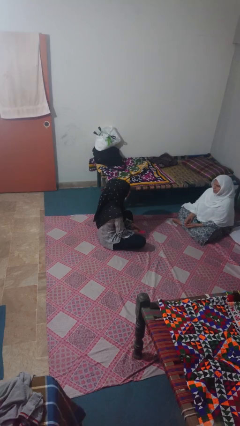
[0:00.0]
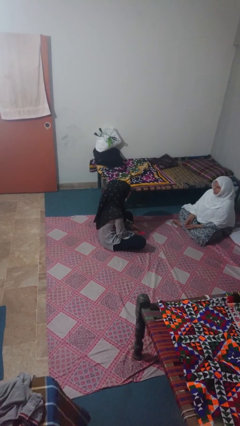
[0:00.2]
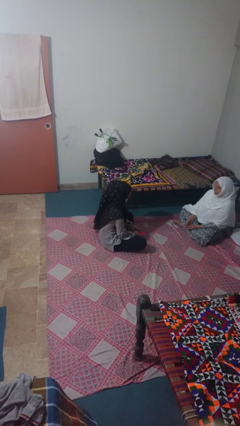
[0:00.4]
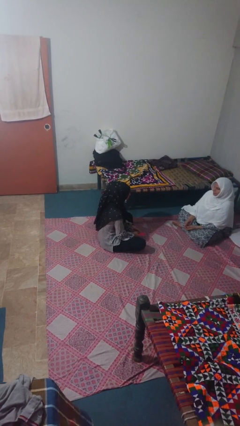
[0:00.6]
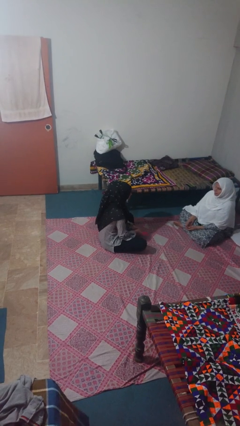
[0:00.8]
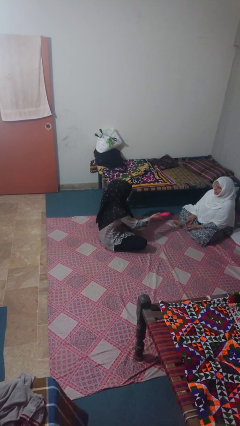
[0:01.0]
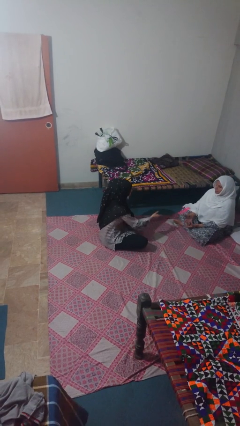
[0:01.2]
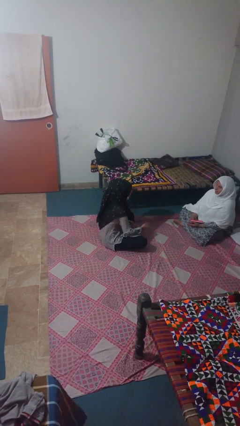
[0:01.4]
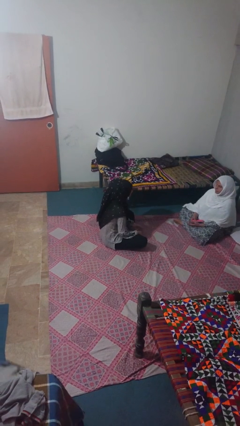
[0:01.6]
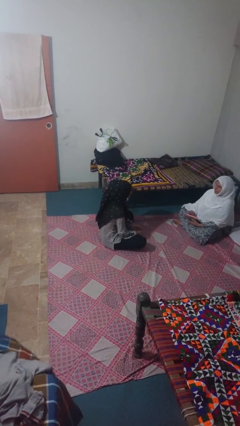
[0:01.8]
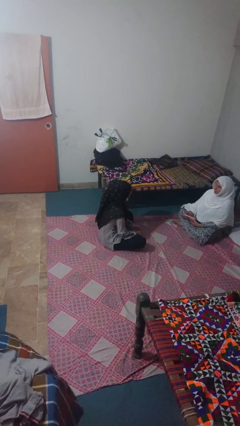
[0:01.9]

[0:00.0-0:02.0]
person throws object to person

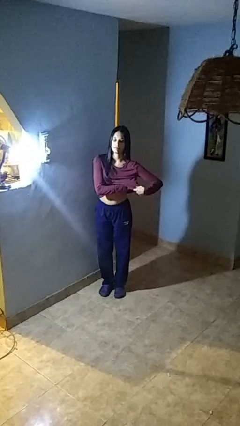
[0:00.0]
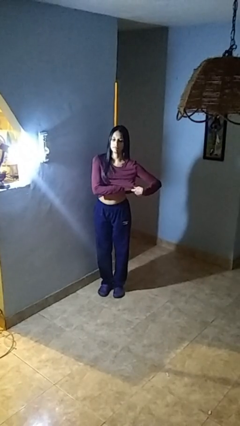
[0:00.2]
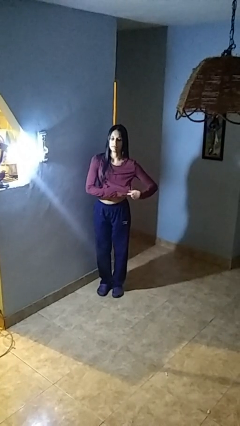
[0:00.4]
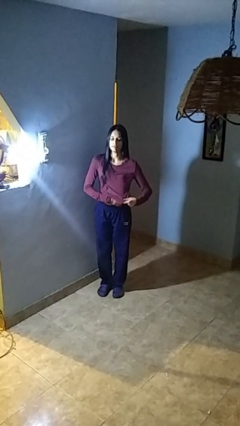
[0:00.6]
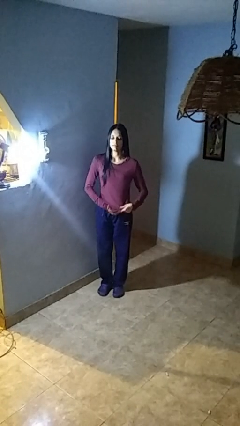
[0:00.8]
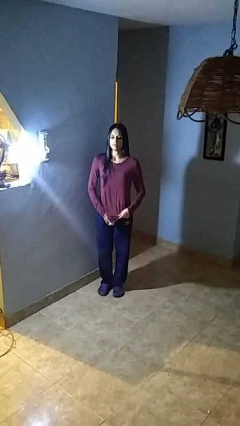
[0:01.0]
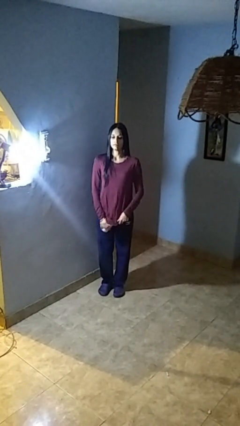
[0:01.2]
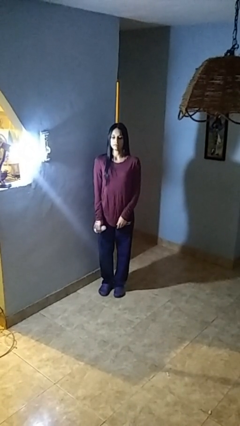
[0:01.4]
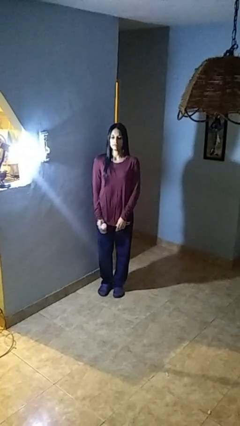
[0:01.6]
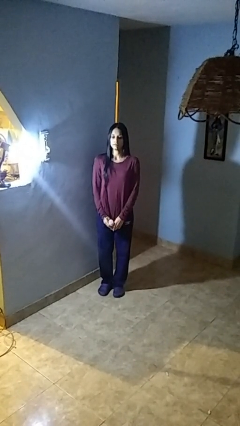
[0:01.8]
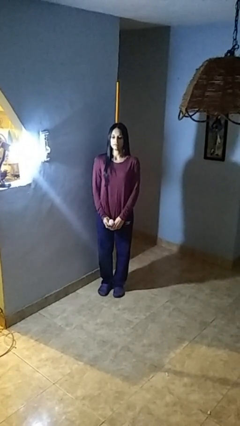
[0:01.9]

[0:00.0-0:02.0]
person applies deodorant

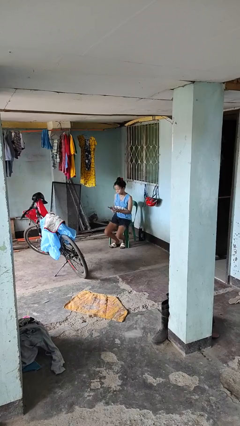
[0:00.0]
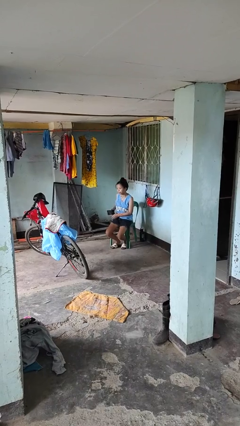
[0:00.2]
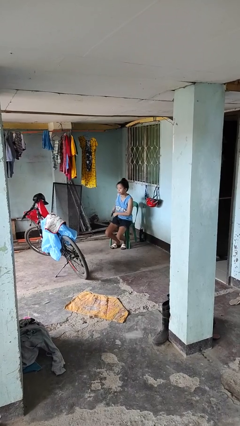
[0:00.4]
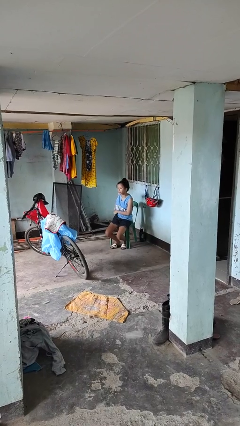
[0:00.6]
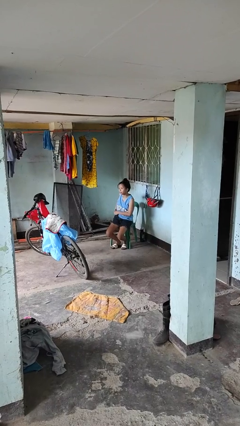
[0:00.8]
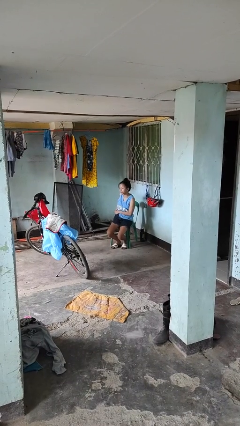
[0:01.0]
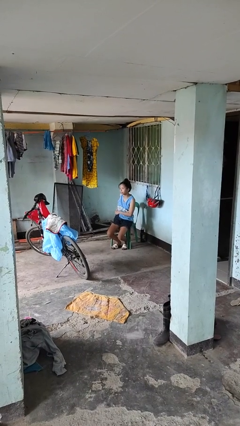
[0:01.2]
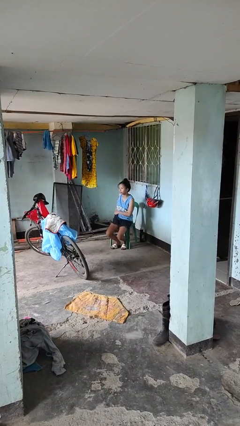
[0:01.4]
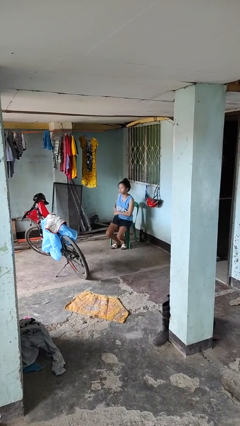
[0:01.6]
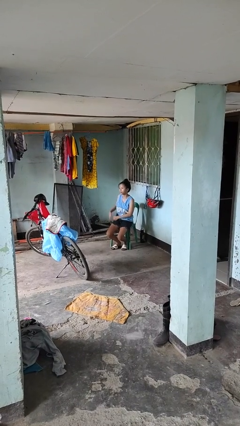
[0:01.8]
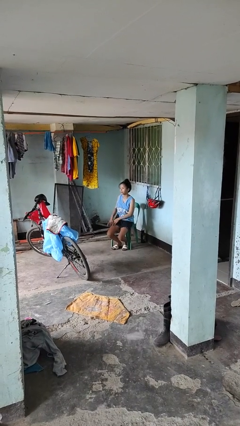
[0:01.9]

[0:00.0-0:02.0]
person puts phone into pocket

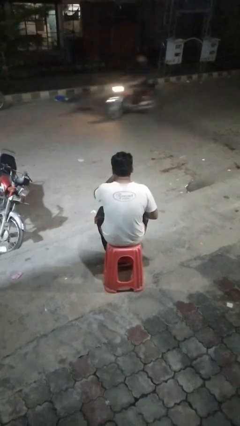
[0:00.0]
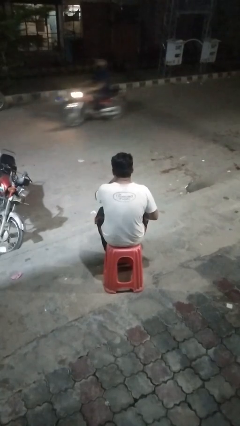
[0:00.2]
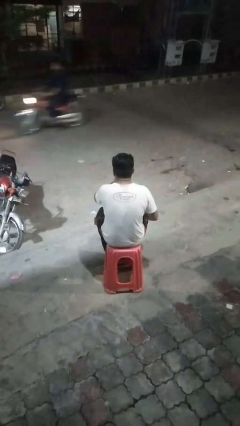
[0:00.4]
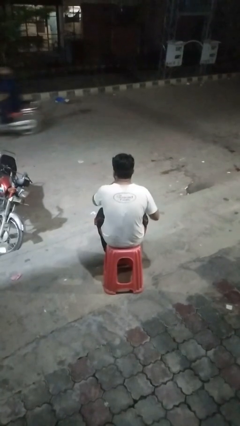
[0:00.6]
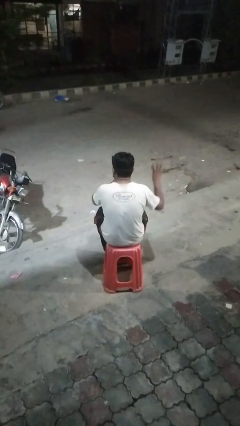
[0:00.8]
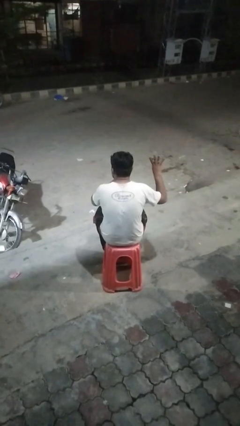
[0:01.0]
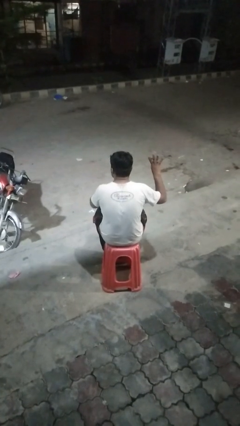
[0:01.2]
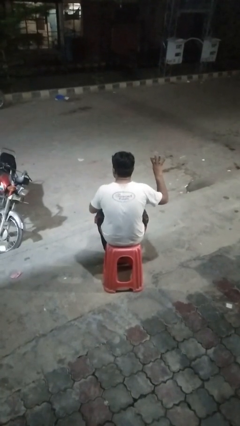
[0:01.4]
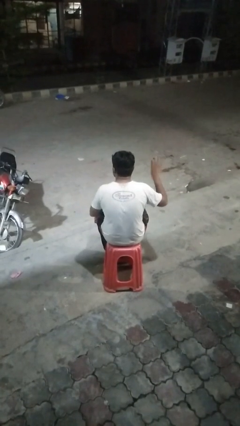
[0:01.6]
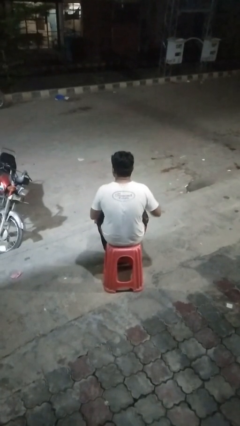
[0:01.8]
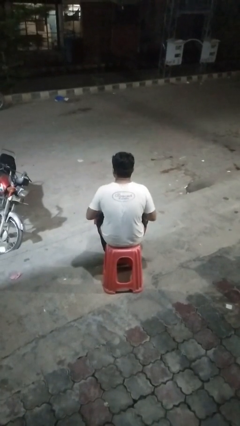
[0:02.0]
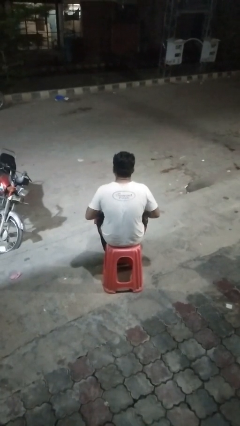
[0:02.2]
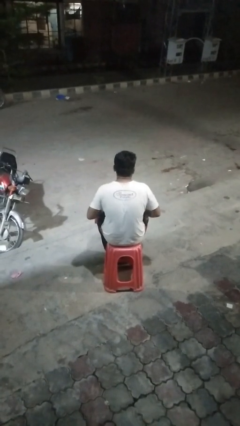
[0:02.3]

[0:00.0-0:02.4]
person gestures number four

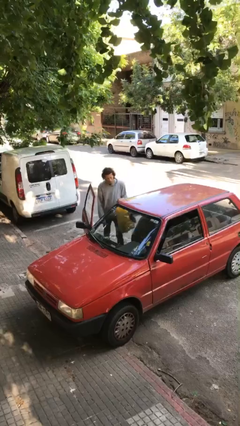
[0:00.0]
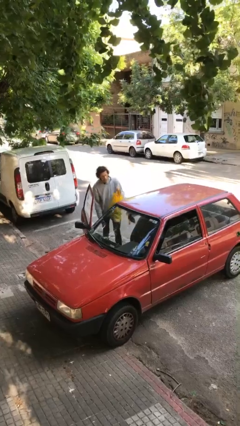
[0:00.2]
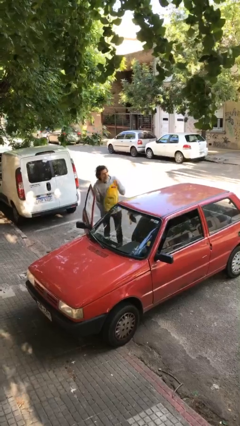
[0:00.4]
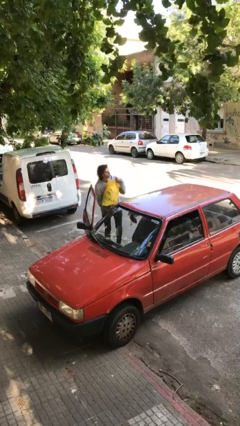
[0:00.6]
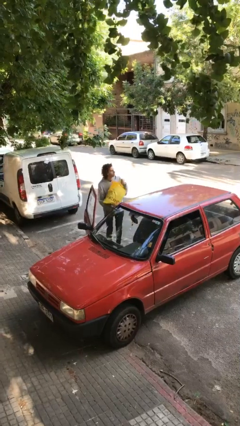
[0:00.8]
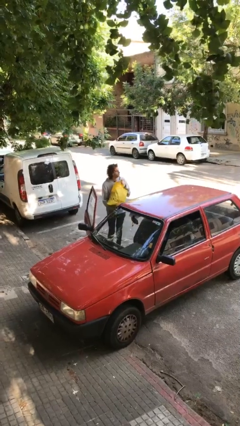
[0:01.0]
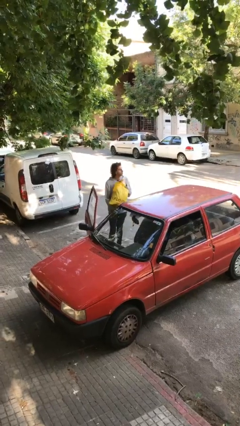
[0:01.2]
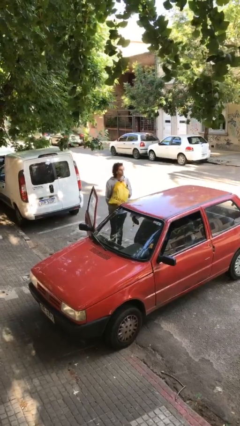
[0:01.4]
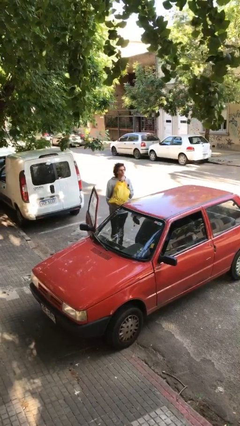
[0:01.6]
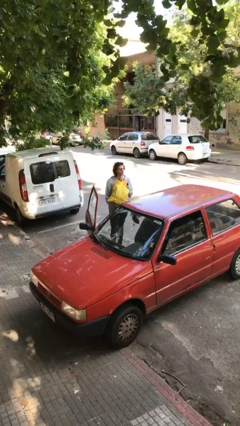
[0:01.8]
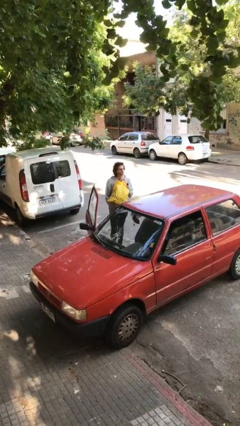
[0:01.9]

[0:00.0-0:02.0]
person unloads car

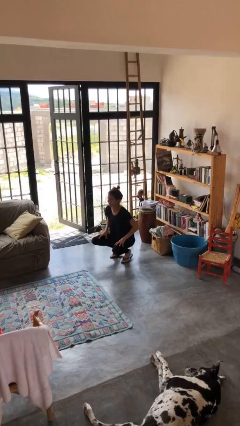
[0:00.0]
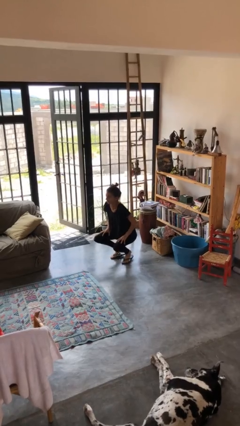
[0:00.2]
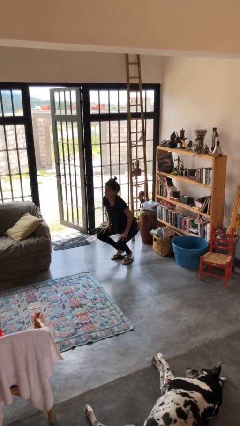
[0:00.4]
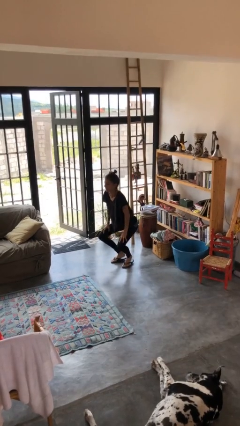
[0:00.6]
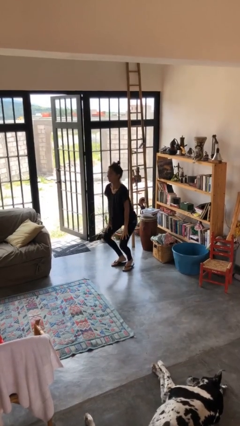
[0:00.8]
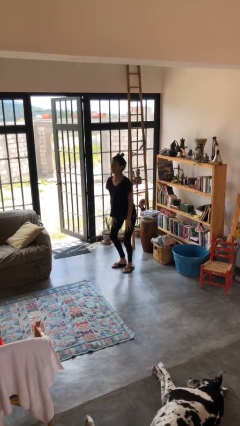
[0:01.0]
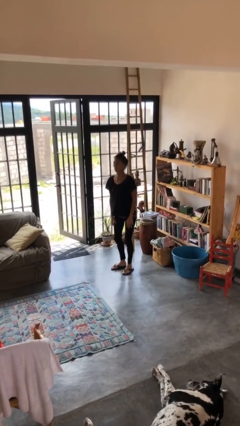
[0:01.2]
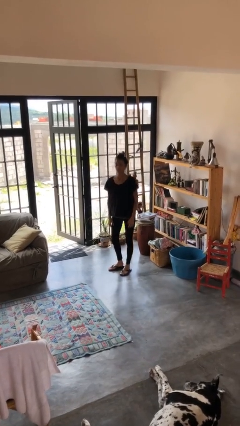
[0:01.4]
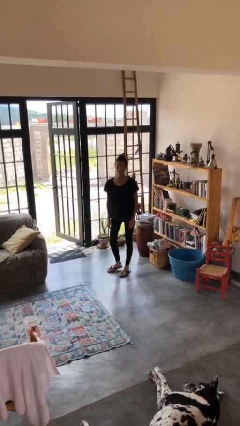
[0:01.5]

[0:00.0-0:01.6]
person stands up

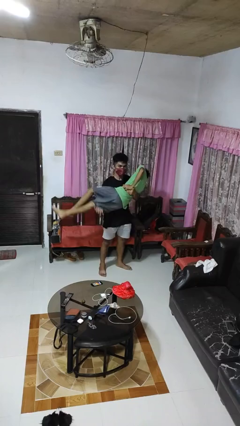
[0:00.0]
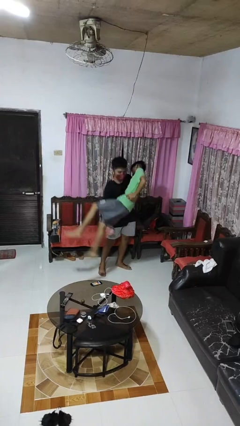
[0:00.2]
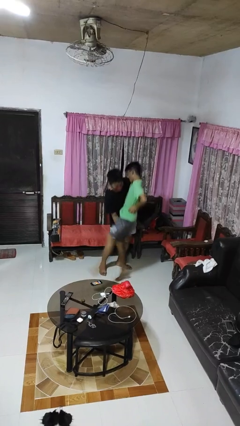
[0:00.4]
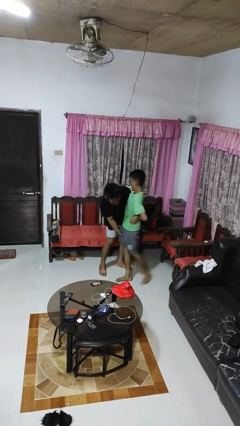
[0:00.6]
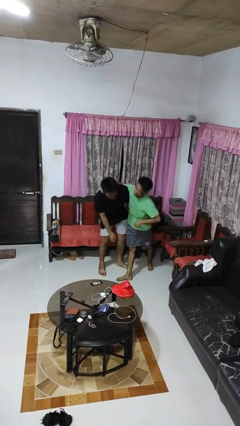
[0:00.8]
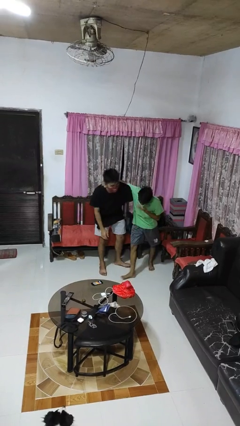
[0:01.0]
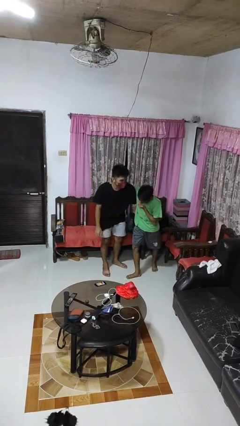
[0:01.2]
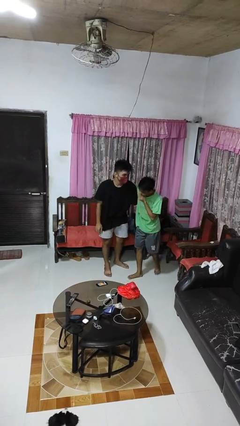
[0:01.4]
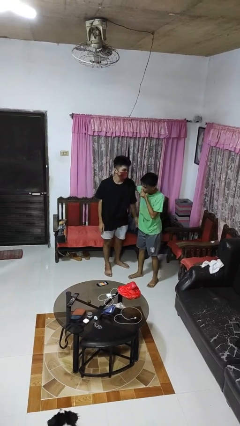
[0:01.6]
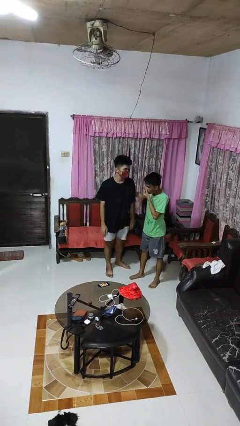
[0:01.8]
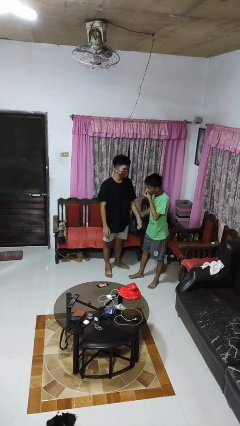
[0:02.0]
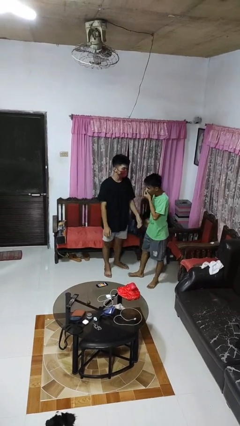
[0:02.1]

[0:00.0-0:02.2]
person puts down person

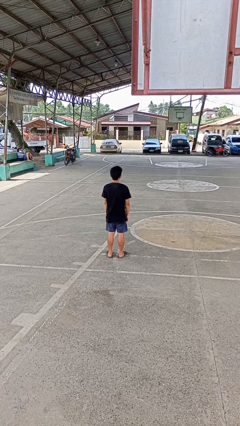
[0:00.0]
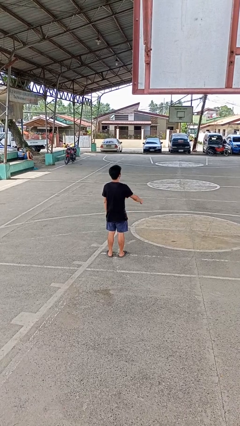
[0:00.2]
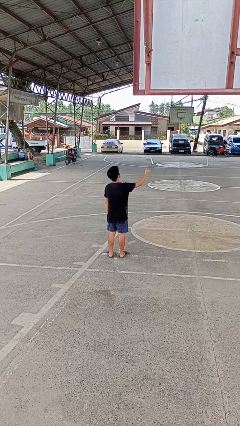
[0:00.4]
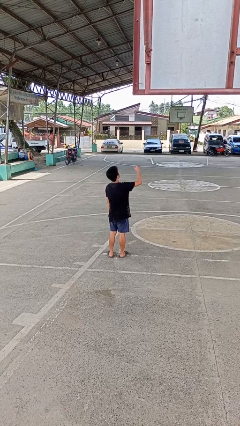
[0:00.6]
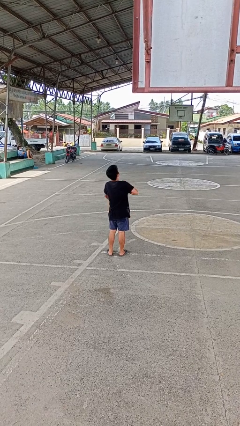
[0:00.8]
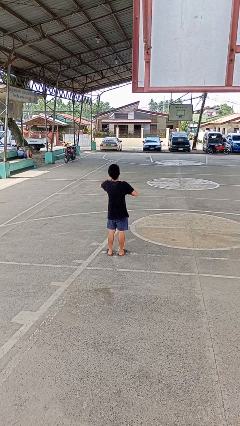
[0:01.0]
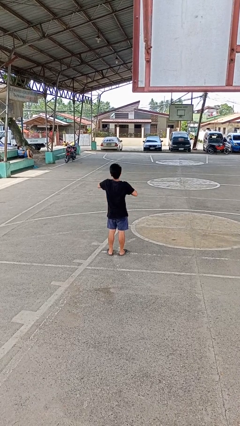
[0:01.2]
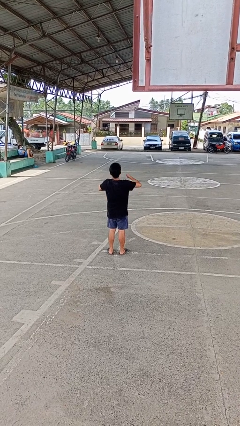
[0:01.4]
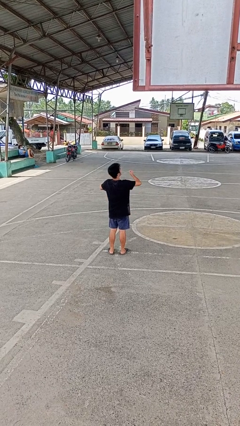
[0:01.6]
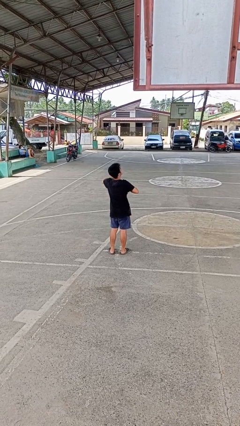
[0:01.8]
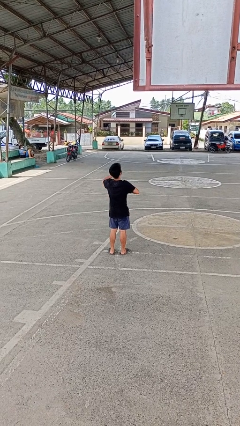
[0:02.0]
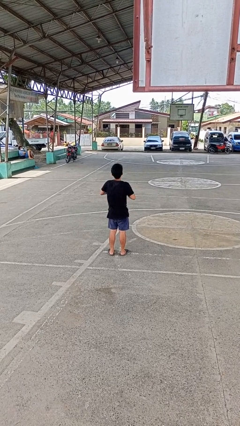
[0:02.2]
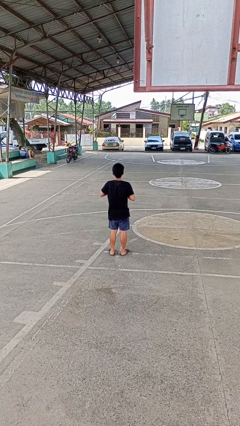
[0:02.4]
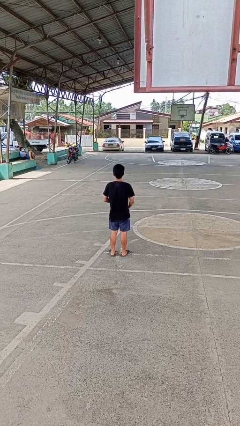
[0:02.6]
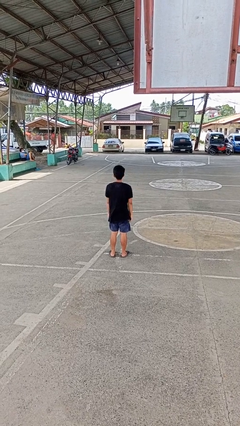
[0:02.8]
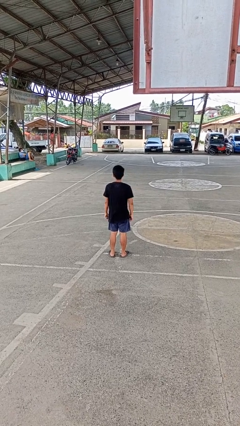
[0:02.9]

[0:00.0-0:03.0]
person drums on chest
